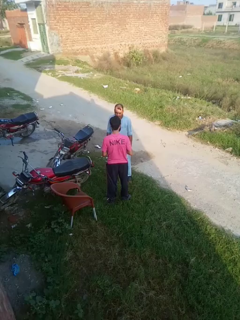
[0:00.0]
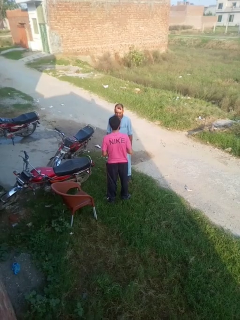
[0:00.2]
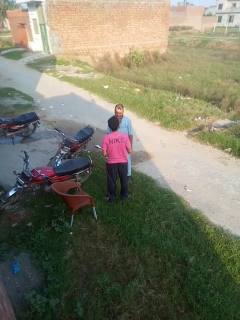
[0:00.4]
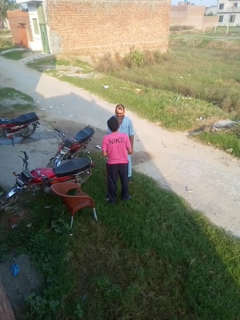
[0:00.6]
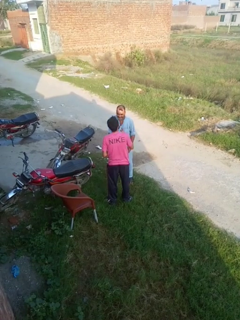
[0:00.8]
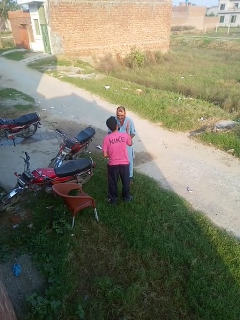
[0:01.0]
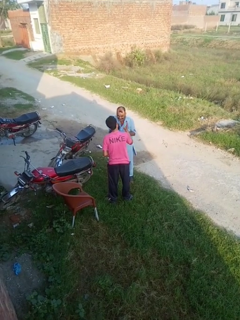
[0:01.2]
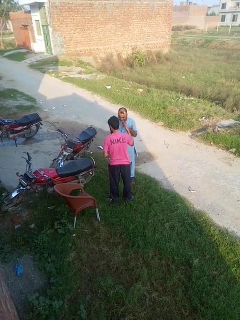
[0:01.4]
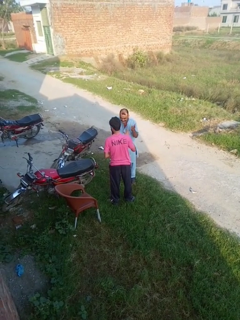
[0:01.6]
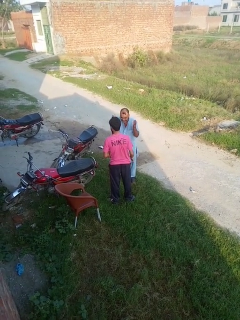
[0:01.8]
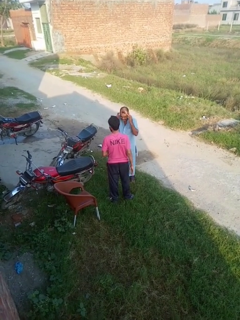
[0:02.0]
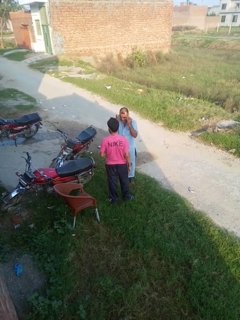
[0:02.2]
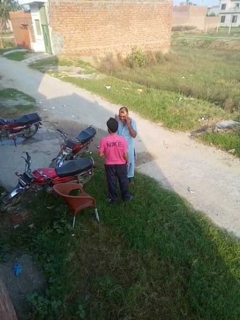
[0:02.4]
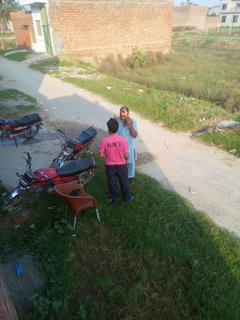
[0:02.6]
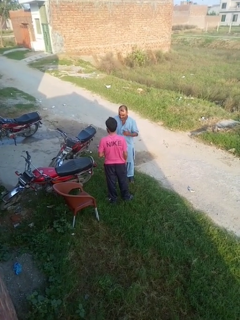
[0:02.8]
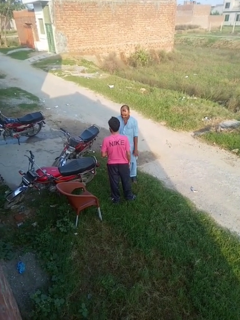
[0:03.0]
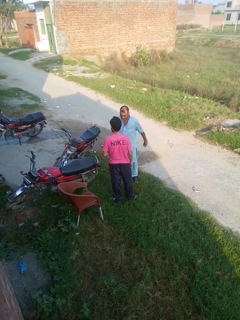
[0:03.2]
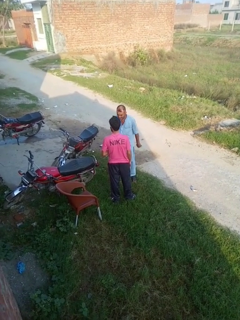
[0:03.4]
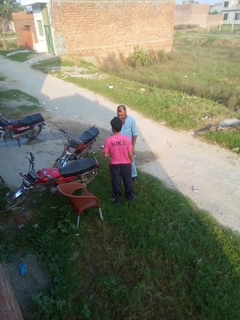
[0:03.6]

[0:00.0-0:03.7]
person laughs with person

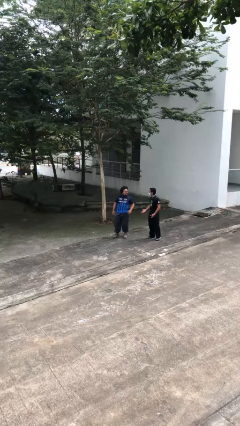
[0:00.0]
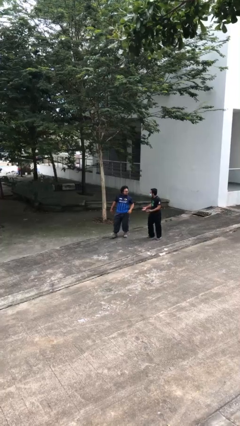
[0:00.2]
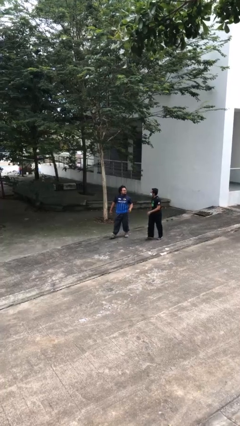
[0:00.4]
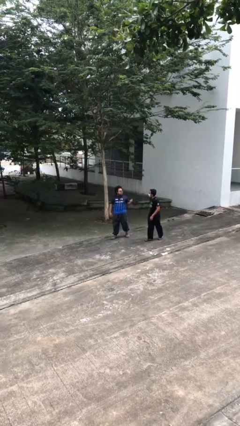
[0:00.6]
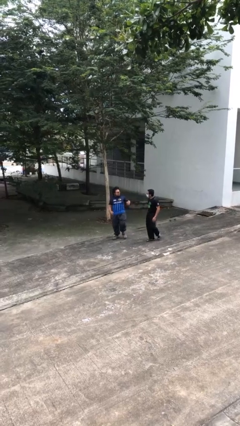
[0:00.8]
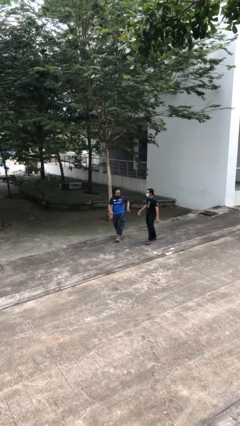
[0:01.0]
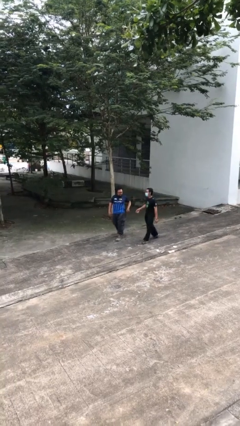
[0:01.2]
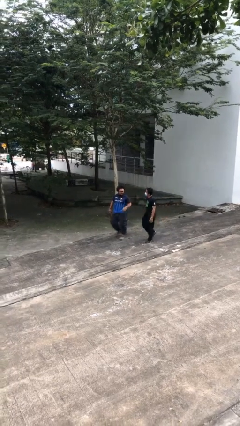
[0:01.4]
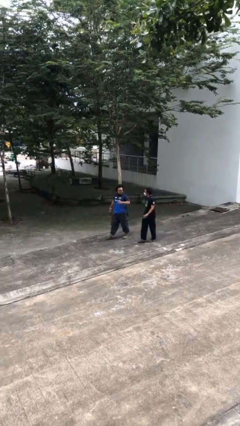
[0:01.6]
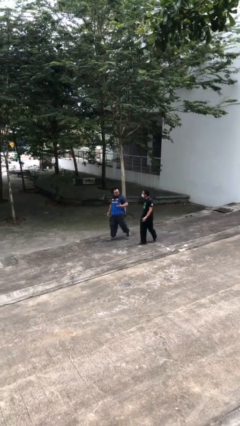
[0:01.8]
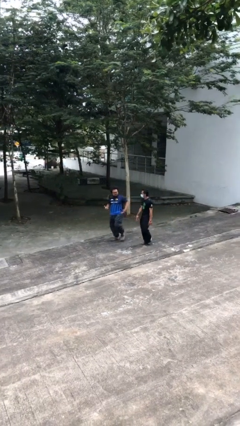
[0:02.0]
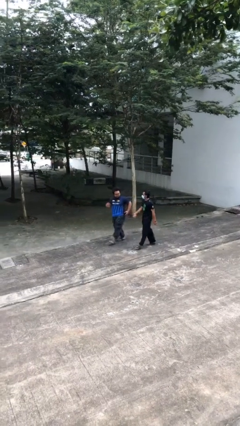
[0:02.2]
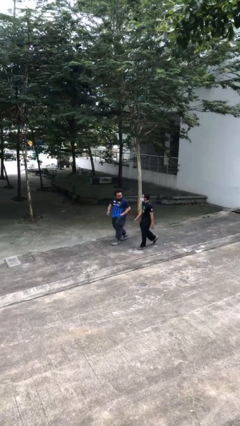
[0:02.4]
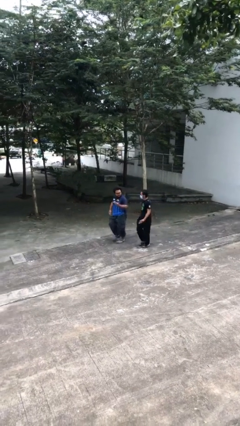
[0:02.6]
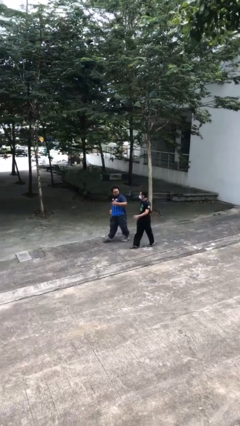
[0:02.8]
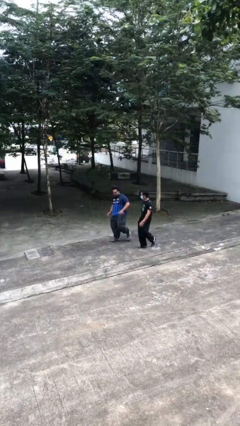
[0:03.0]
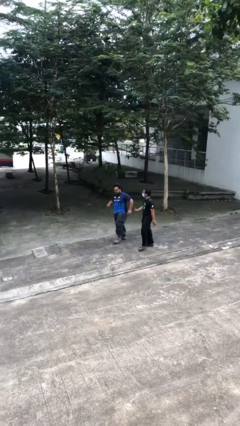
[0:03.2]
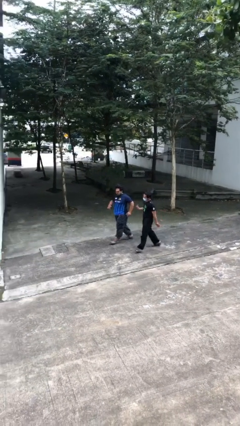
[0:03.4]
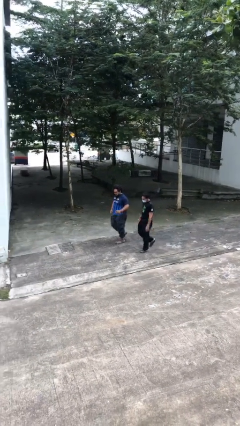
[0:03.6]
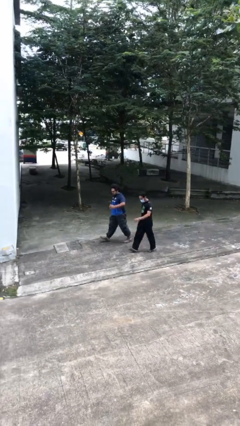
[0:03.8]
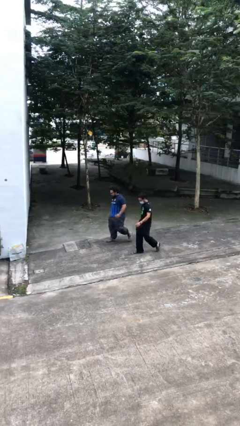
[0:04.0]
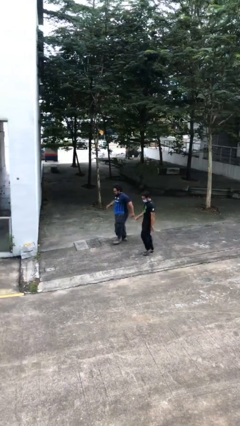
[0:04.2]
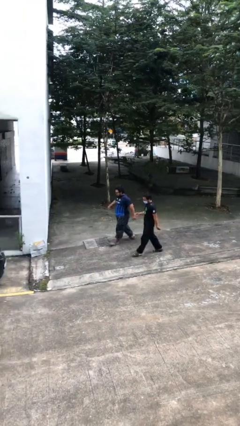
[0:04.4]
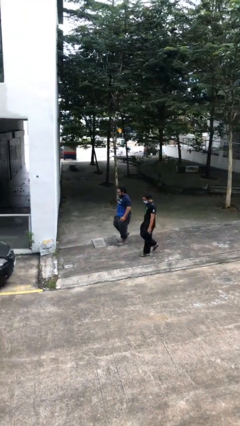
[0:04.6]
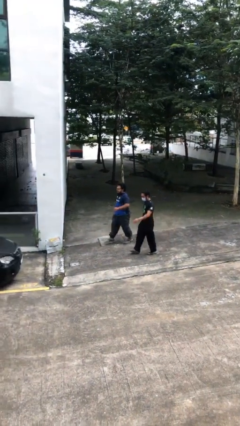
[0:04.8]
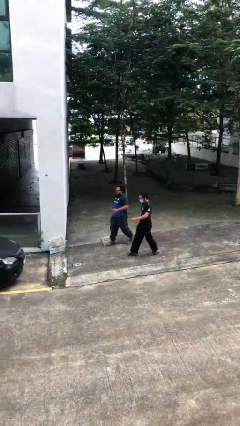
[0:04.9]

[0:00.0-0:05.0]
person talks to person

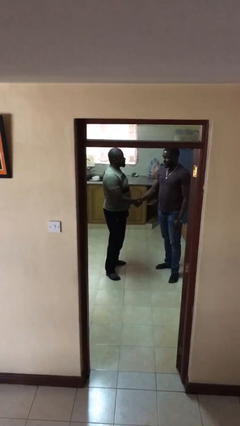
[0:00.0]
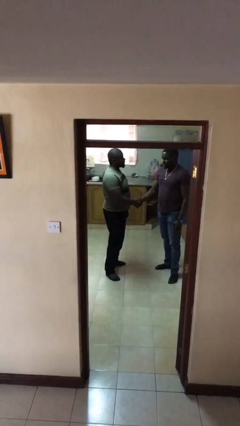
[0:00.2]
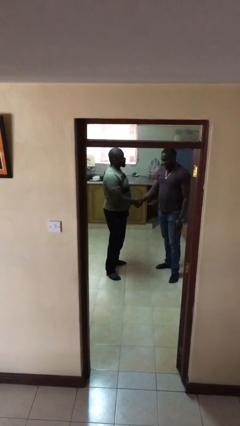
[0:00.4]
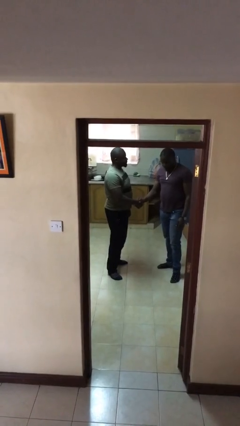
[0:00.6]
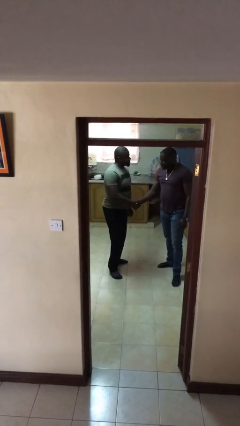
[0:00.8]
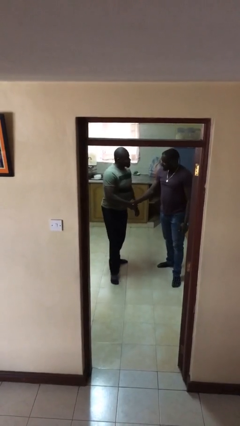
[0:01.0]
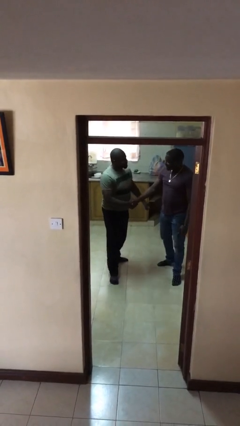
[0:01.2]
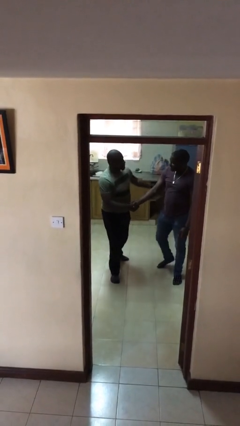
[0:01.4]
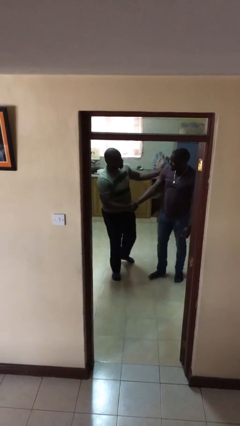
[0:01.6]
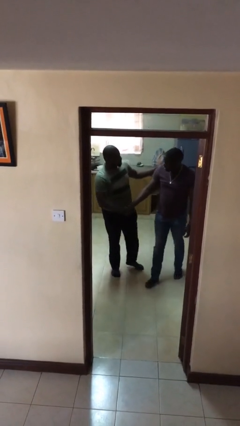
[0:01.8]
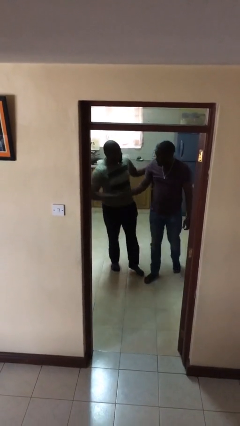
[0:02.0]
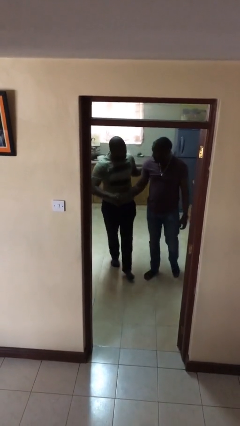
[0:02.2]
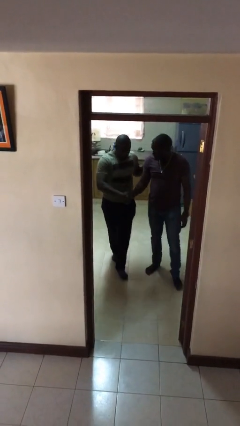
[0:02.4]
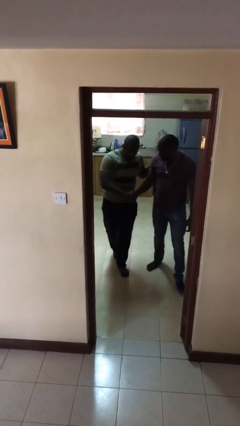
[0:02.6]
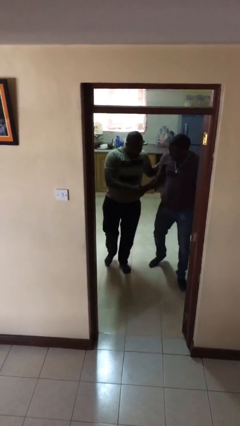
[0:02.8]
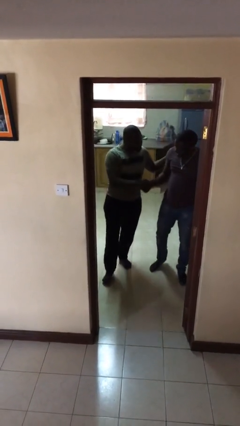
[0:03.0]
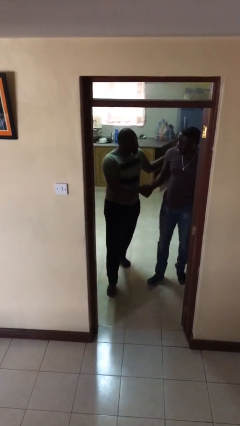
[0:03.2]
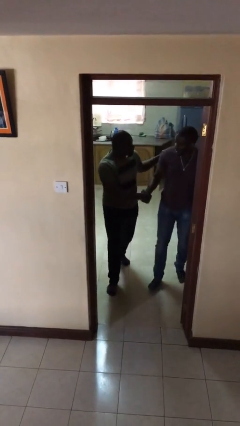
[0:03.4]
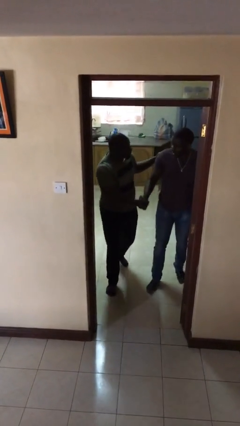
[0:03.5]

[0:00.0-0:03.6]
person holds hand

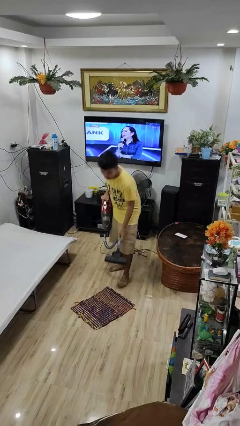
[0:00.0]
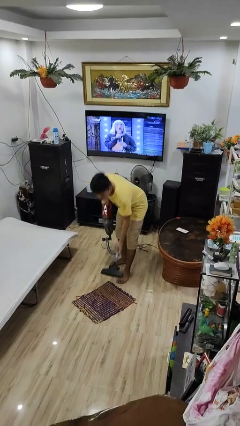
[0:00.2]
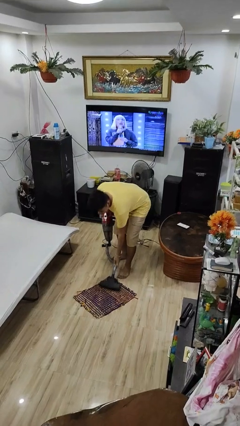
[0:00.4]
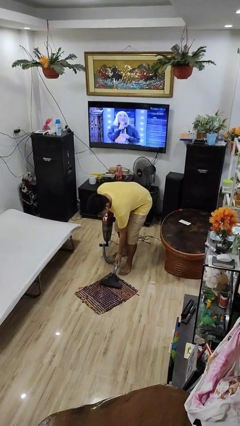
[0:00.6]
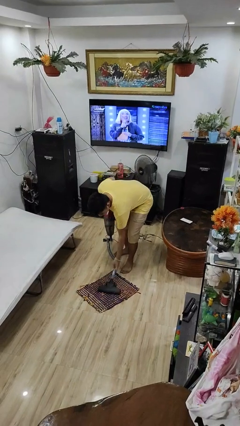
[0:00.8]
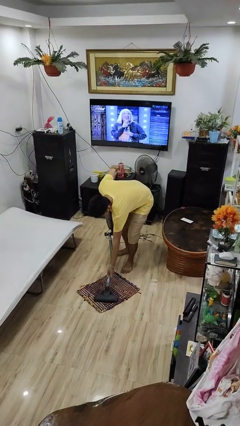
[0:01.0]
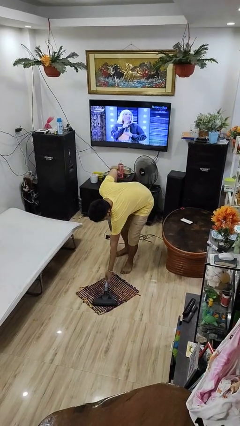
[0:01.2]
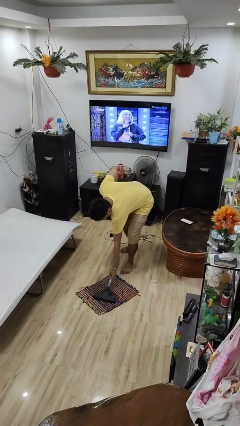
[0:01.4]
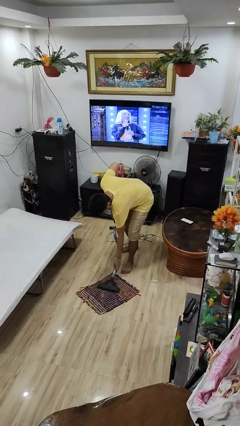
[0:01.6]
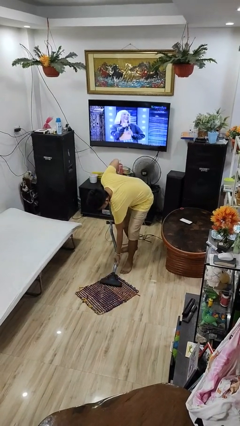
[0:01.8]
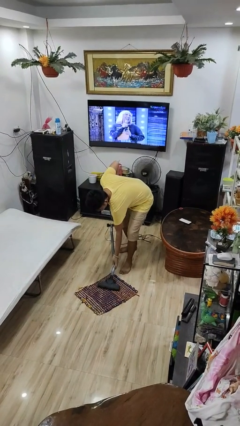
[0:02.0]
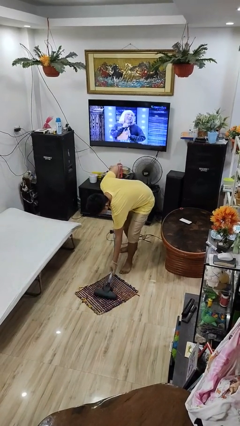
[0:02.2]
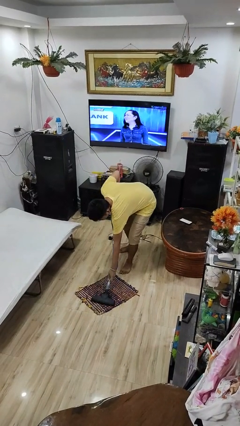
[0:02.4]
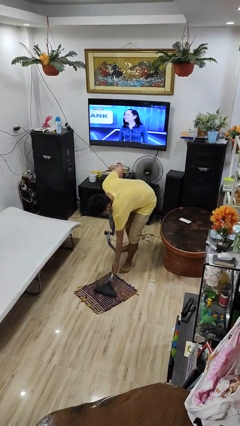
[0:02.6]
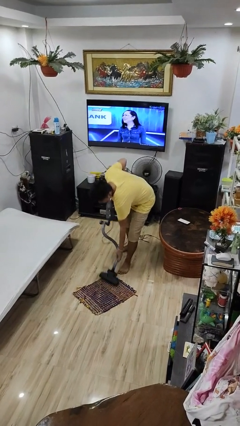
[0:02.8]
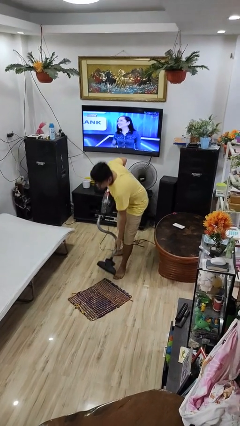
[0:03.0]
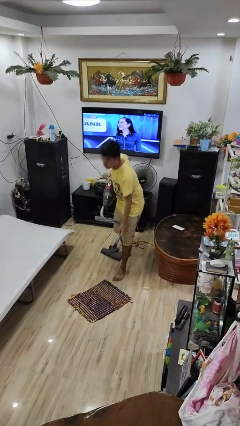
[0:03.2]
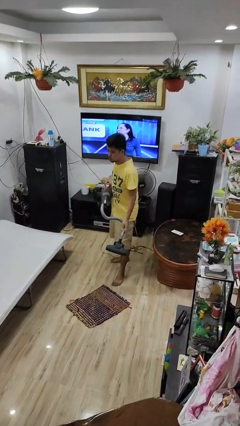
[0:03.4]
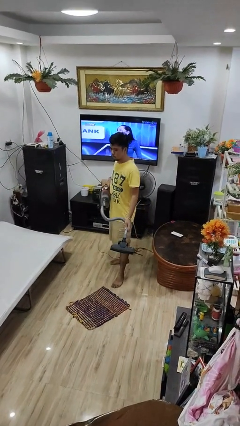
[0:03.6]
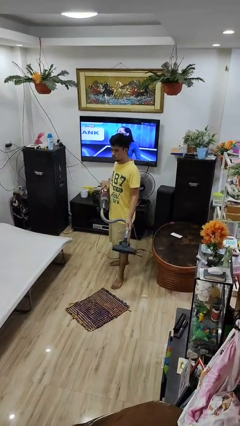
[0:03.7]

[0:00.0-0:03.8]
person vacuums carpet

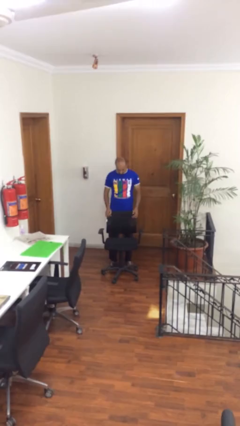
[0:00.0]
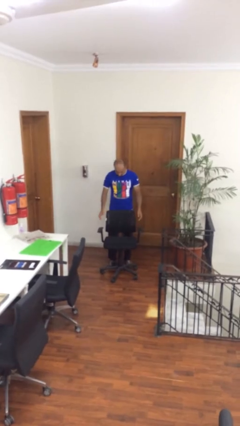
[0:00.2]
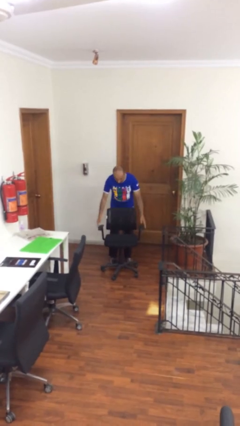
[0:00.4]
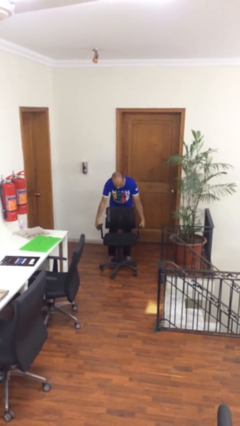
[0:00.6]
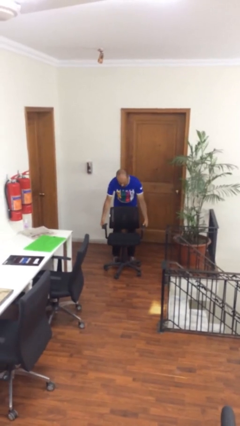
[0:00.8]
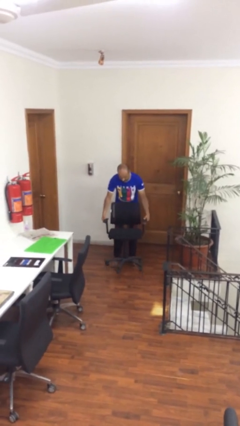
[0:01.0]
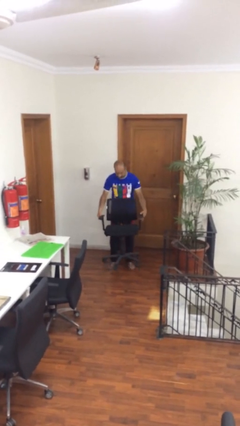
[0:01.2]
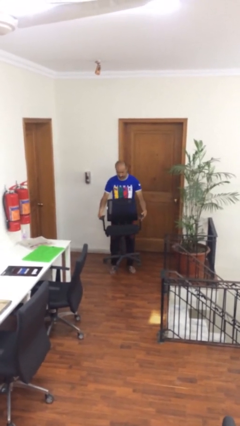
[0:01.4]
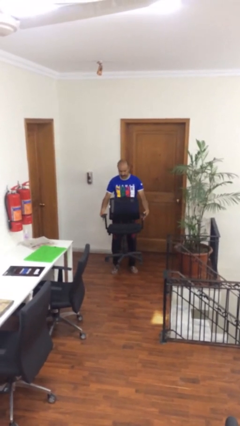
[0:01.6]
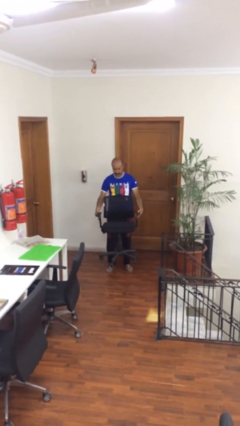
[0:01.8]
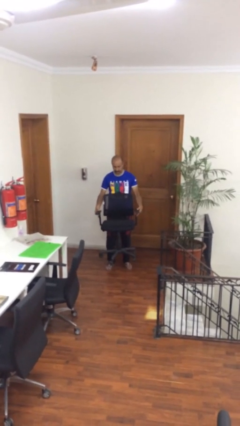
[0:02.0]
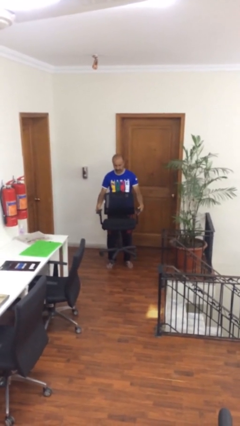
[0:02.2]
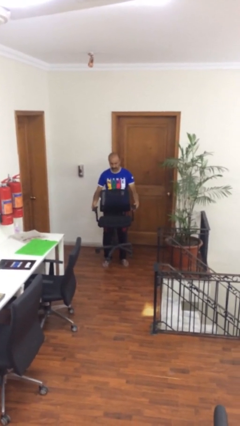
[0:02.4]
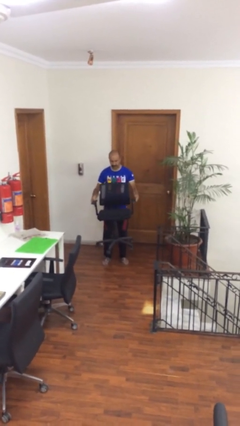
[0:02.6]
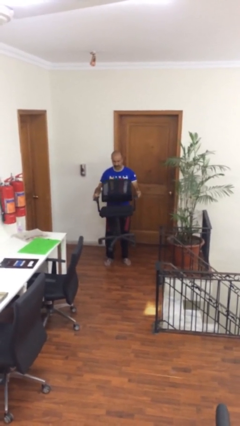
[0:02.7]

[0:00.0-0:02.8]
person picks up object from floor
